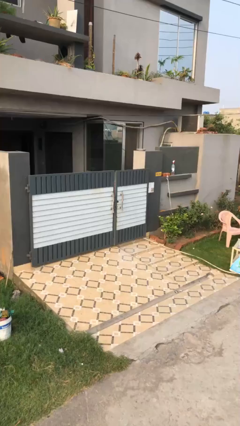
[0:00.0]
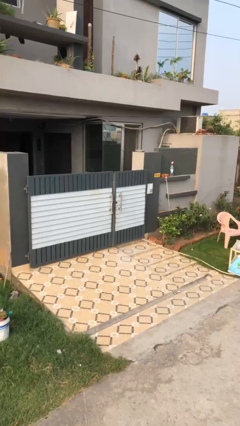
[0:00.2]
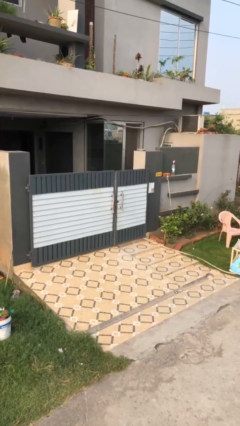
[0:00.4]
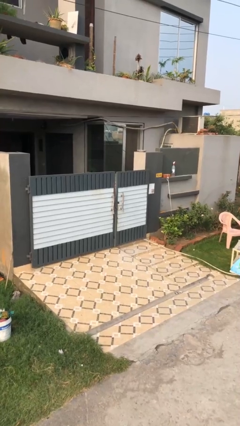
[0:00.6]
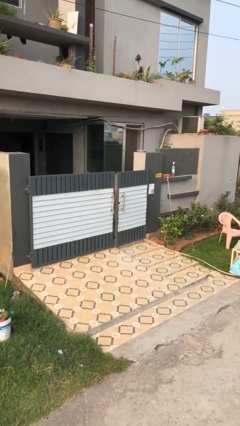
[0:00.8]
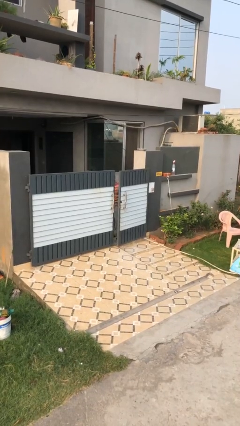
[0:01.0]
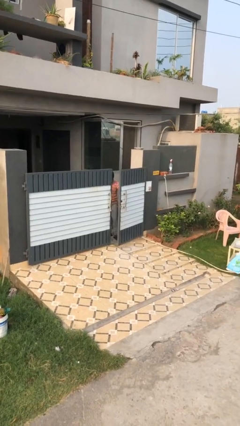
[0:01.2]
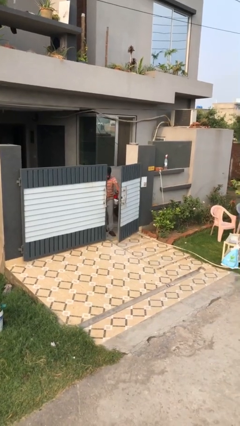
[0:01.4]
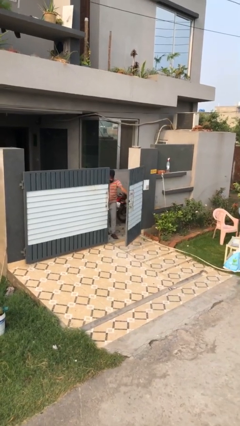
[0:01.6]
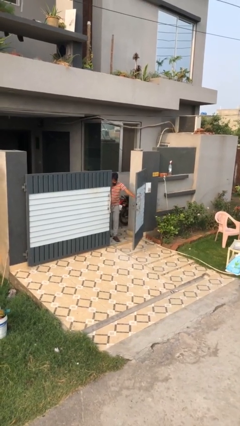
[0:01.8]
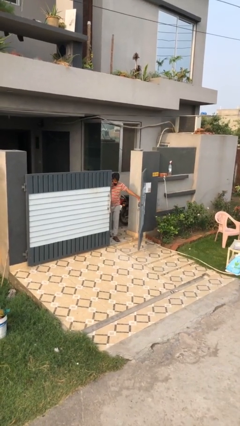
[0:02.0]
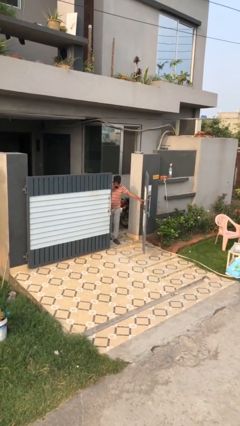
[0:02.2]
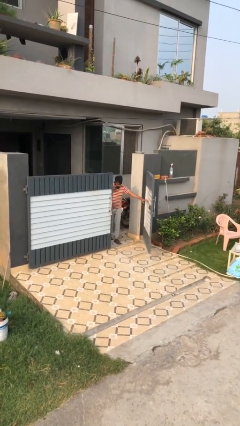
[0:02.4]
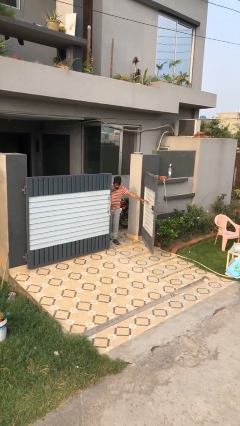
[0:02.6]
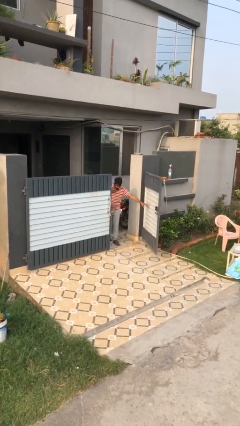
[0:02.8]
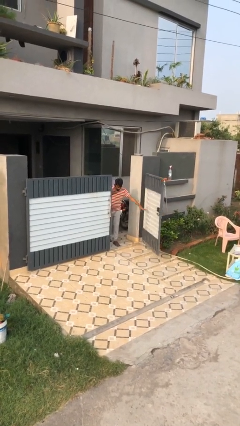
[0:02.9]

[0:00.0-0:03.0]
person opens facility door

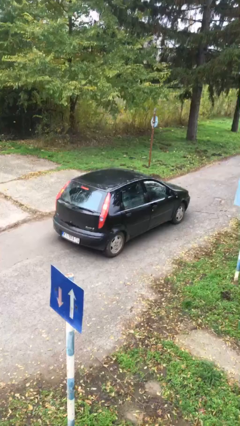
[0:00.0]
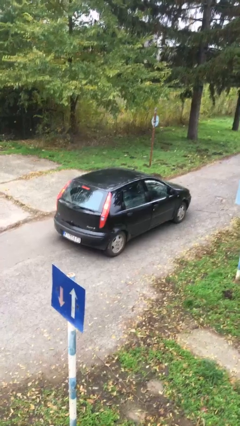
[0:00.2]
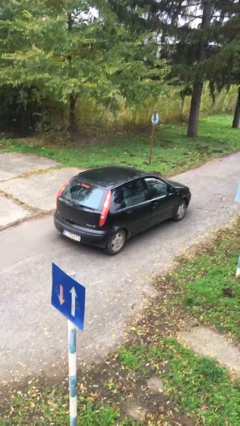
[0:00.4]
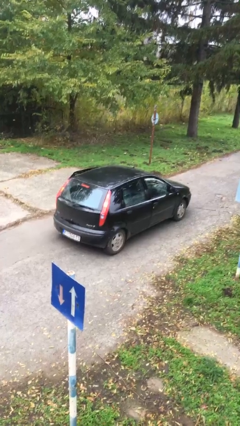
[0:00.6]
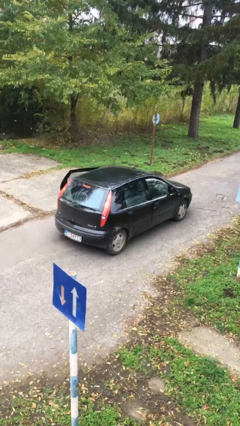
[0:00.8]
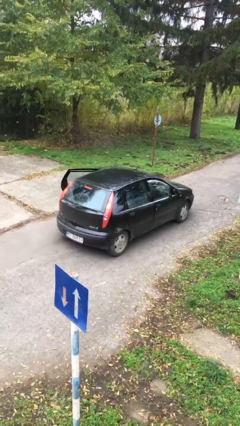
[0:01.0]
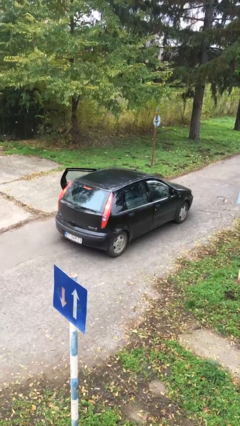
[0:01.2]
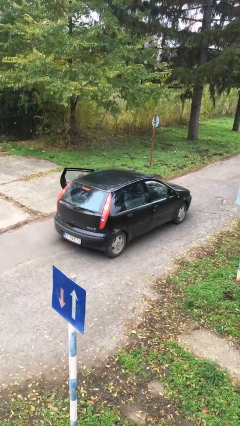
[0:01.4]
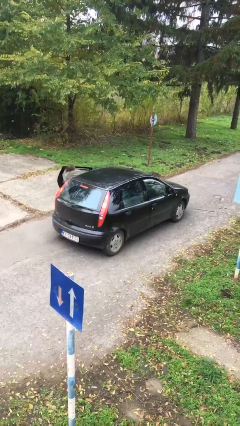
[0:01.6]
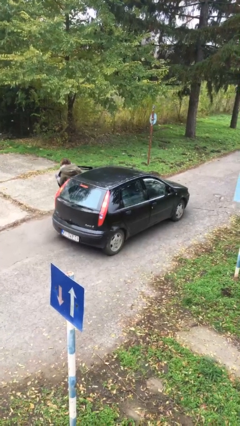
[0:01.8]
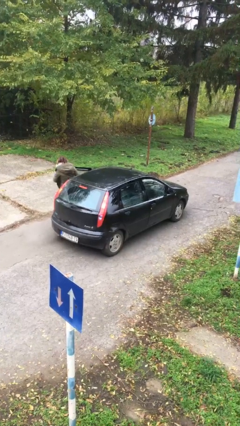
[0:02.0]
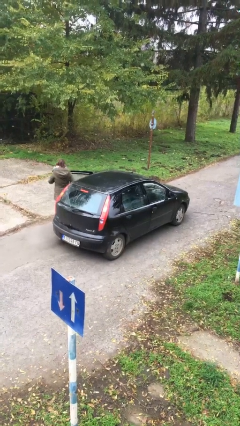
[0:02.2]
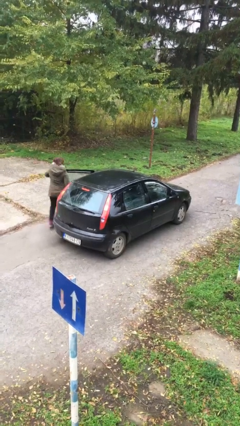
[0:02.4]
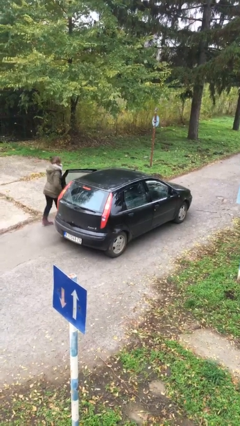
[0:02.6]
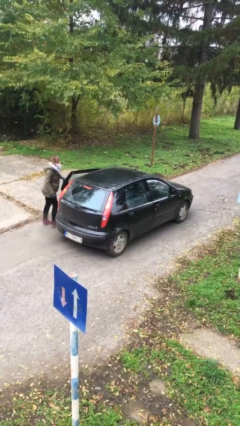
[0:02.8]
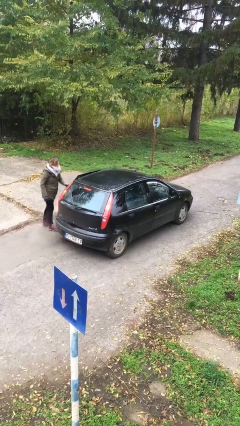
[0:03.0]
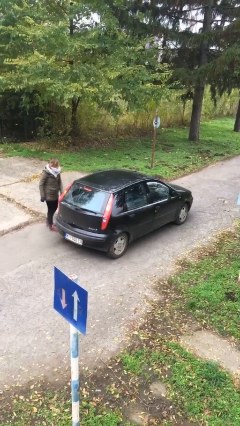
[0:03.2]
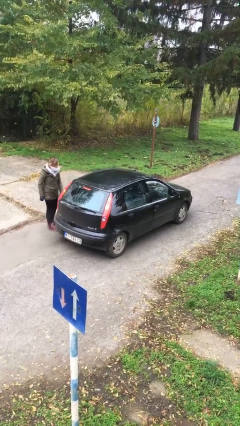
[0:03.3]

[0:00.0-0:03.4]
car drops off person

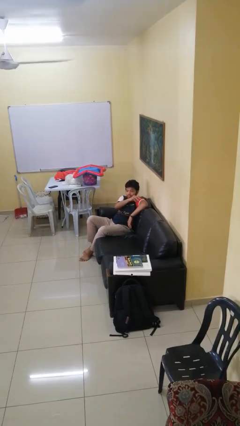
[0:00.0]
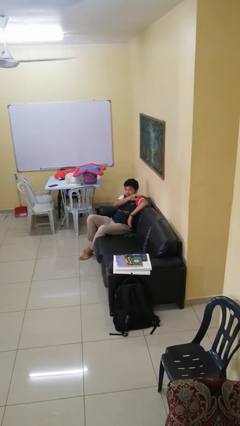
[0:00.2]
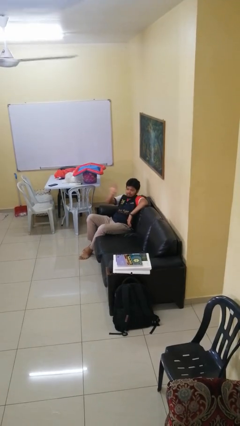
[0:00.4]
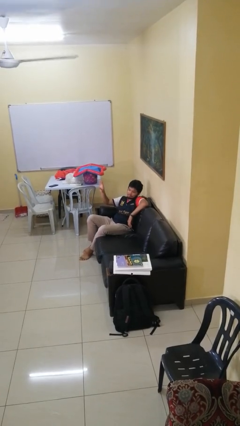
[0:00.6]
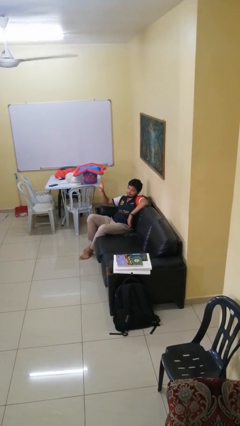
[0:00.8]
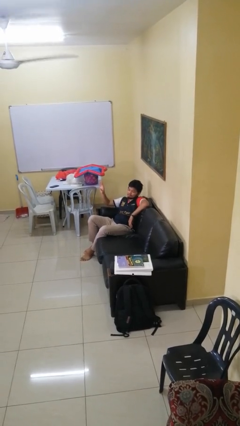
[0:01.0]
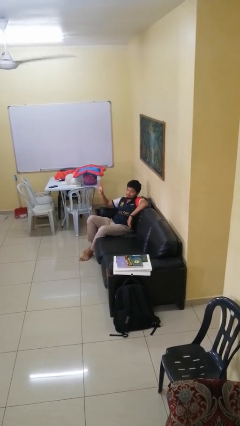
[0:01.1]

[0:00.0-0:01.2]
person gestures swipe right

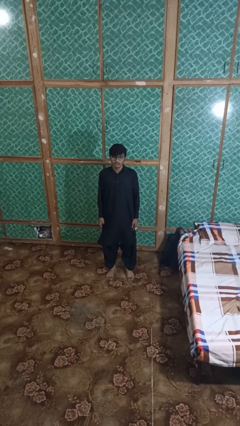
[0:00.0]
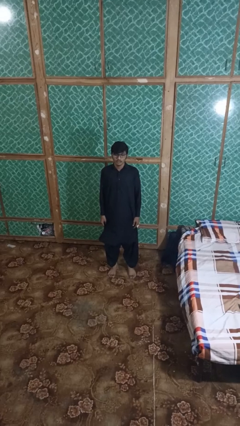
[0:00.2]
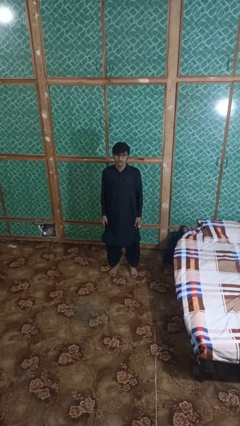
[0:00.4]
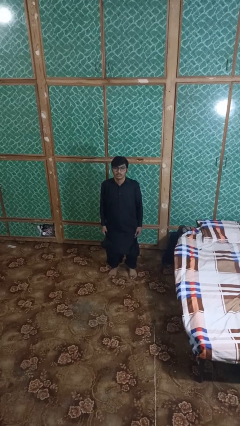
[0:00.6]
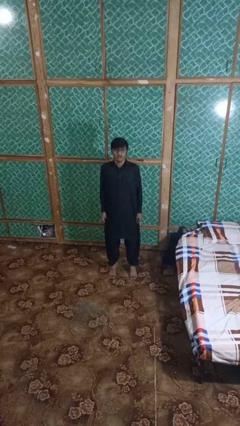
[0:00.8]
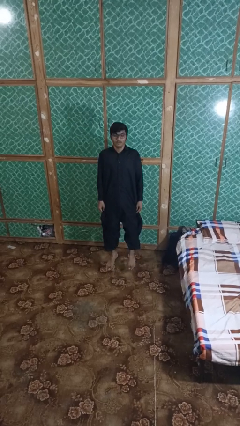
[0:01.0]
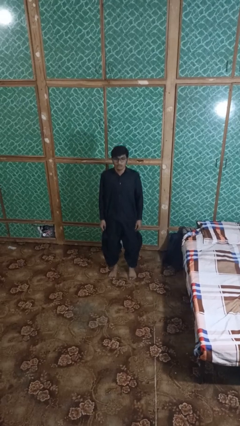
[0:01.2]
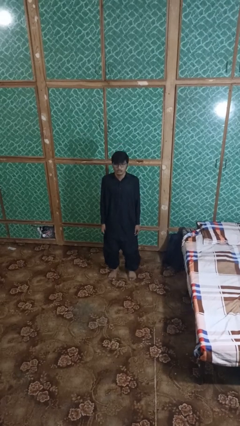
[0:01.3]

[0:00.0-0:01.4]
person jumps

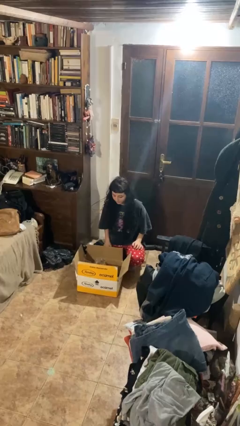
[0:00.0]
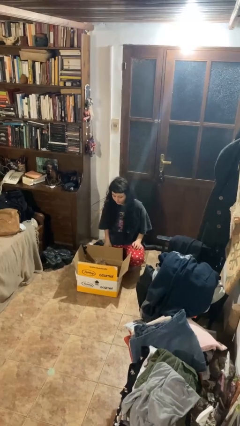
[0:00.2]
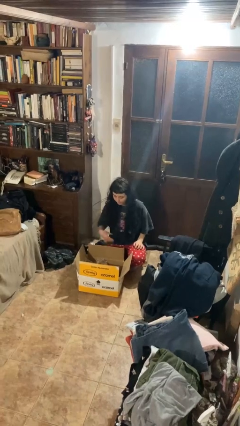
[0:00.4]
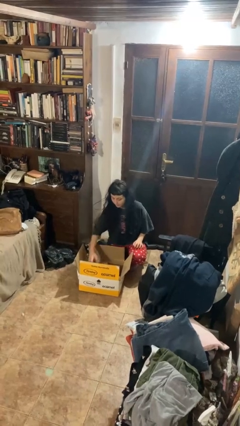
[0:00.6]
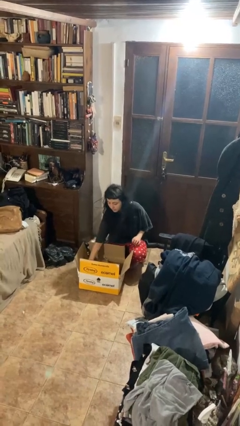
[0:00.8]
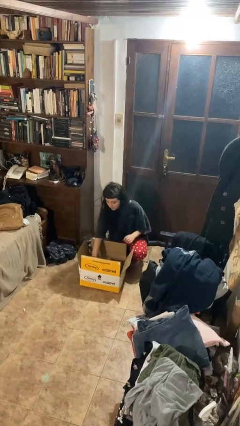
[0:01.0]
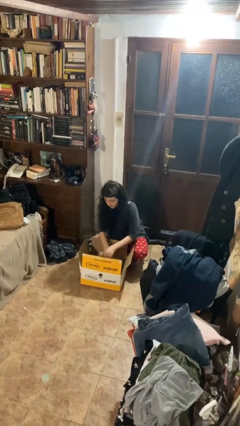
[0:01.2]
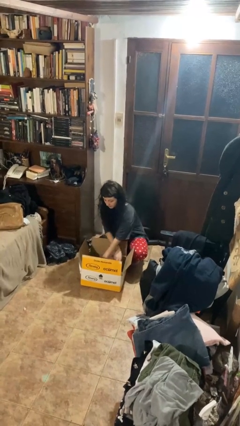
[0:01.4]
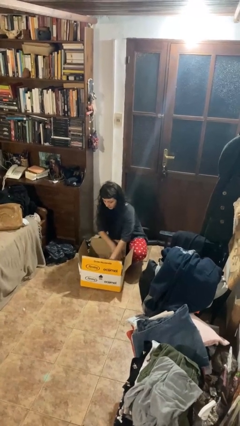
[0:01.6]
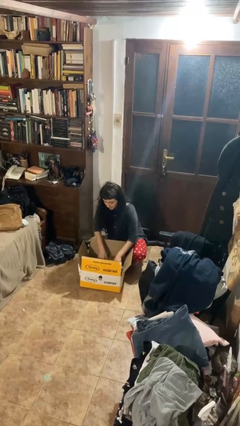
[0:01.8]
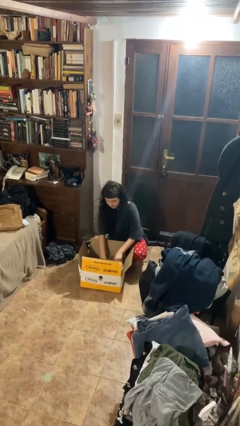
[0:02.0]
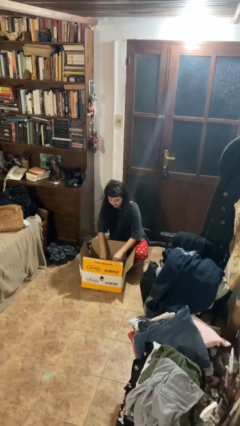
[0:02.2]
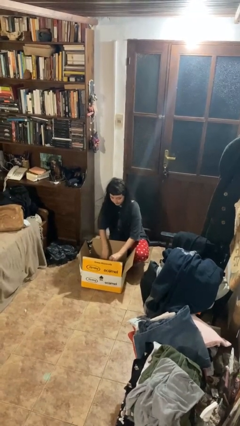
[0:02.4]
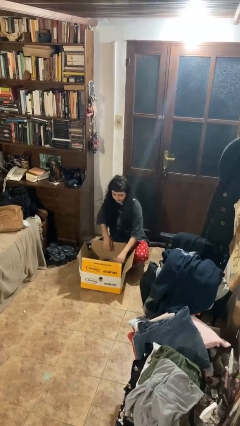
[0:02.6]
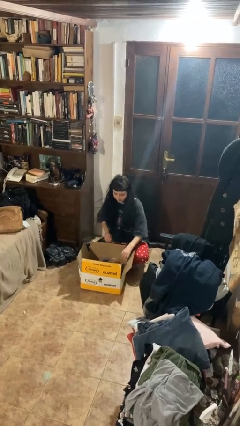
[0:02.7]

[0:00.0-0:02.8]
person searches in box

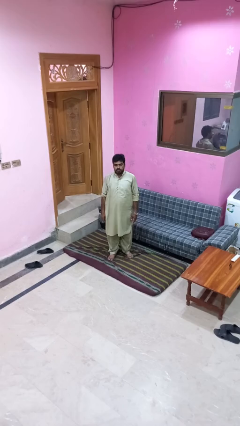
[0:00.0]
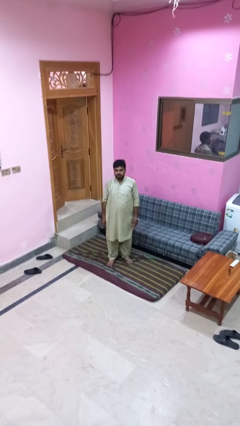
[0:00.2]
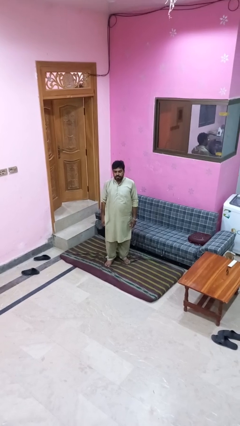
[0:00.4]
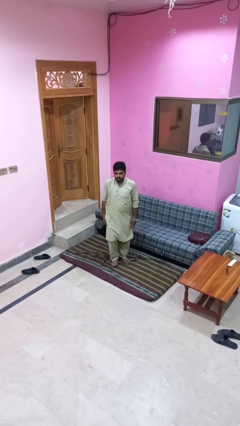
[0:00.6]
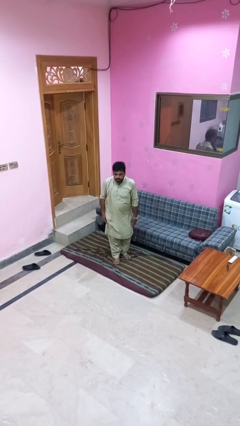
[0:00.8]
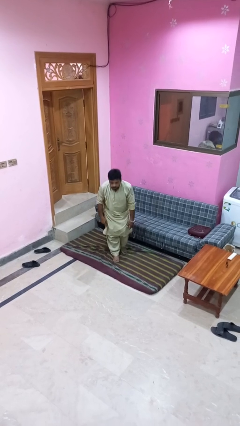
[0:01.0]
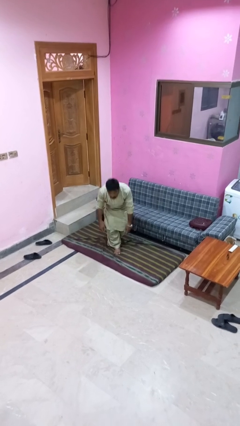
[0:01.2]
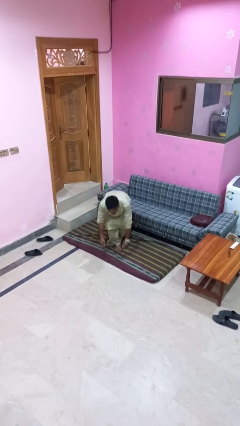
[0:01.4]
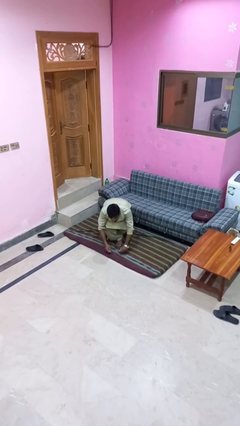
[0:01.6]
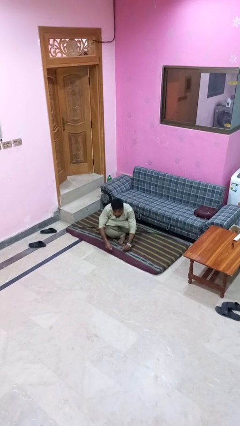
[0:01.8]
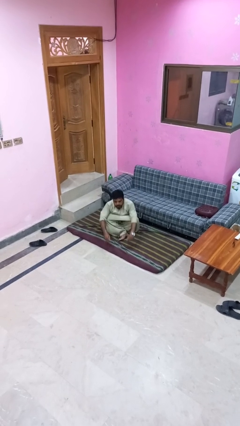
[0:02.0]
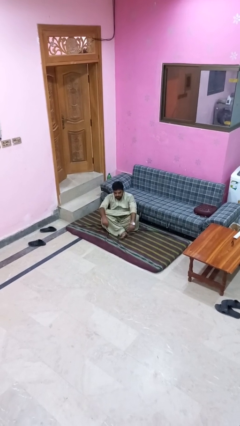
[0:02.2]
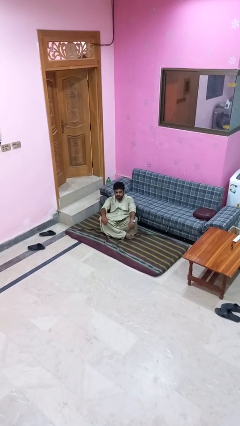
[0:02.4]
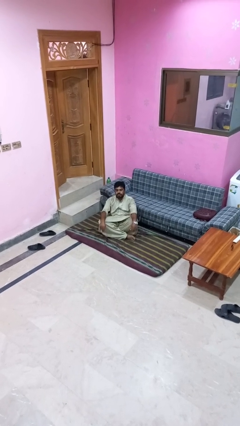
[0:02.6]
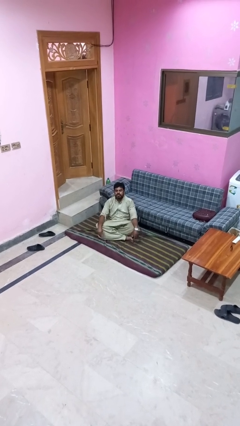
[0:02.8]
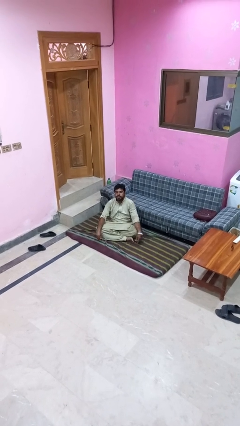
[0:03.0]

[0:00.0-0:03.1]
person sits crisscross

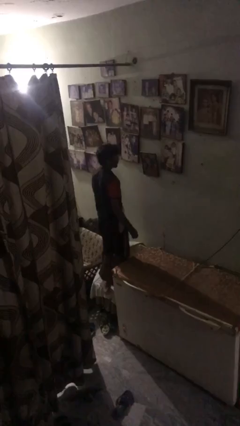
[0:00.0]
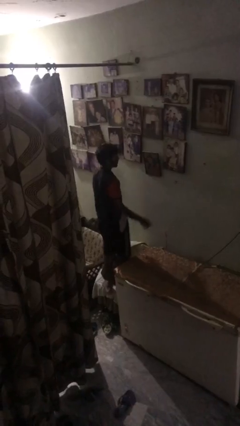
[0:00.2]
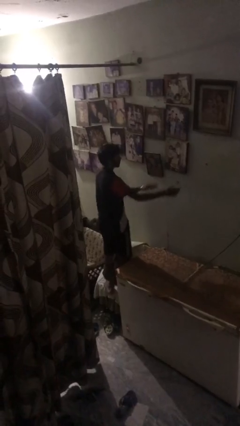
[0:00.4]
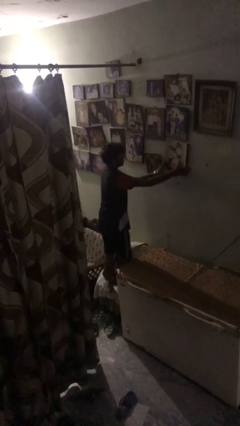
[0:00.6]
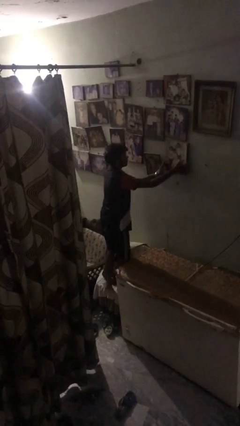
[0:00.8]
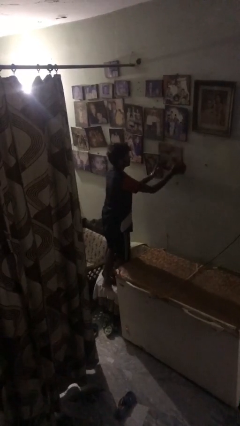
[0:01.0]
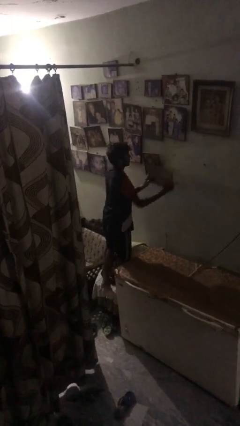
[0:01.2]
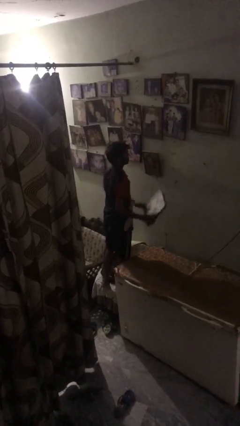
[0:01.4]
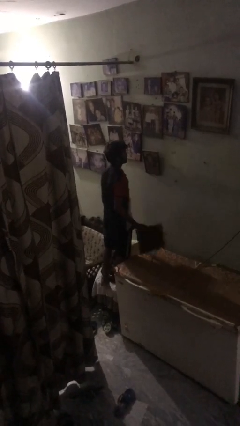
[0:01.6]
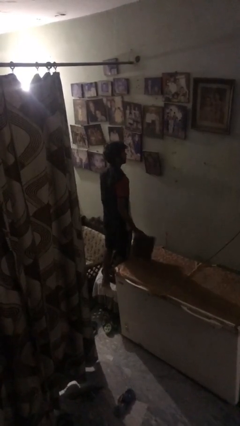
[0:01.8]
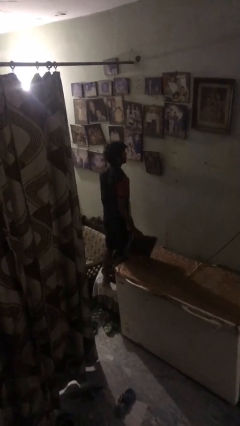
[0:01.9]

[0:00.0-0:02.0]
person takes down picture frame

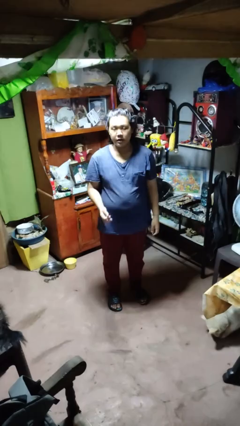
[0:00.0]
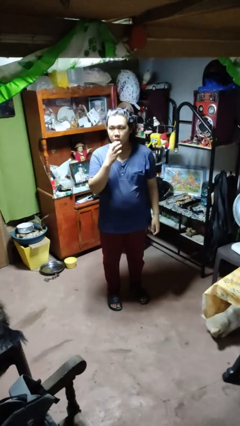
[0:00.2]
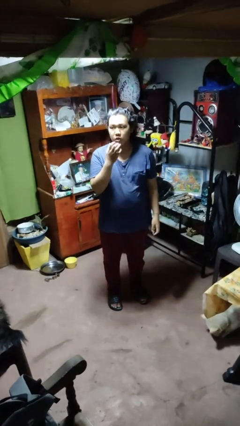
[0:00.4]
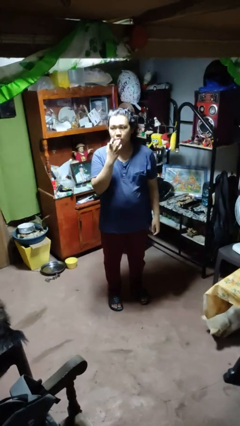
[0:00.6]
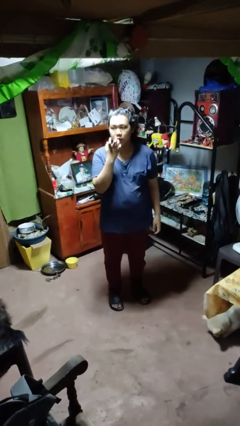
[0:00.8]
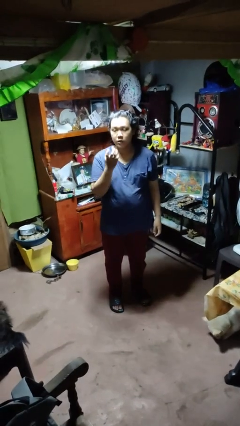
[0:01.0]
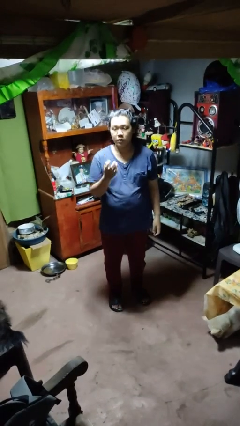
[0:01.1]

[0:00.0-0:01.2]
person licks fingers